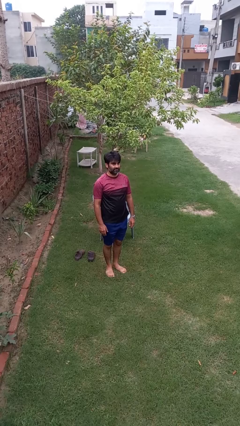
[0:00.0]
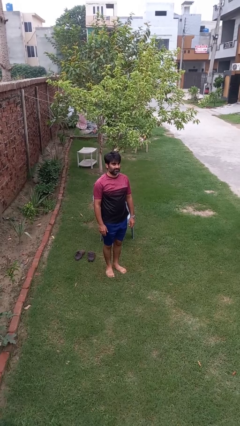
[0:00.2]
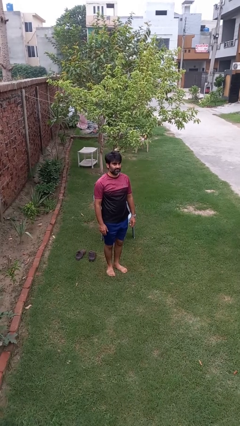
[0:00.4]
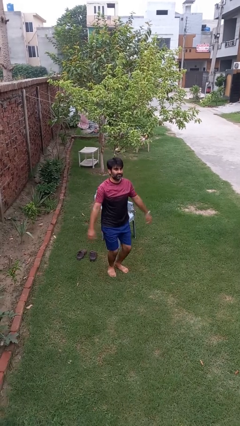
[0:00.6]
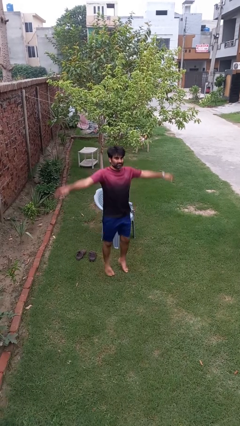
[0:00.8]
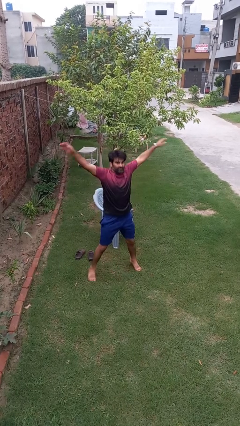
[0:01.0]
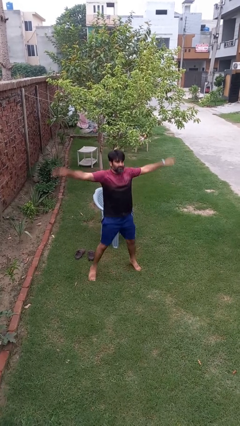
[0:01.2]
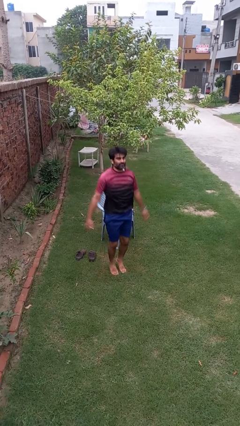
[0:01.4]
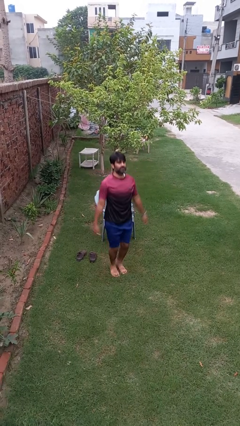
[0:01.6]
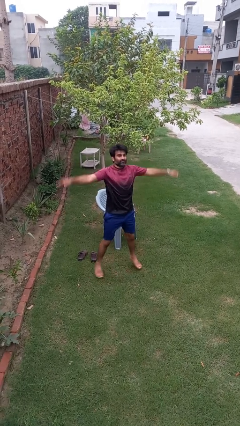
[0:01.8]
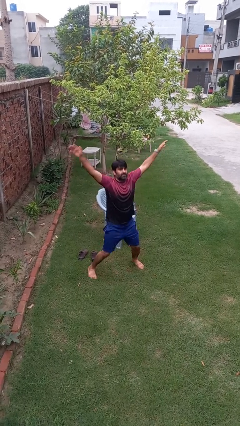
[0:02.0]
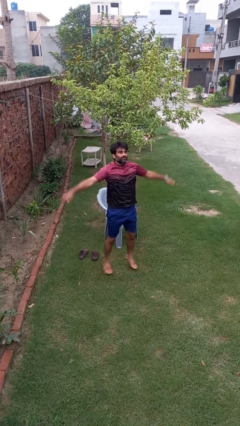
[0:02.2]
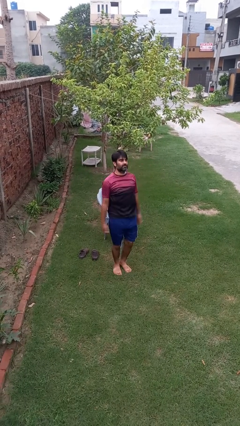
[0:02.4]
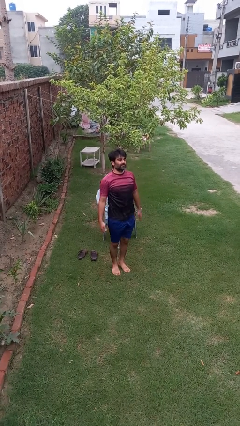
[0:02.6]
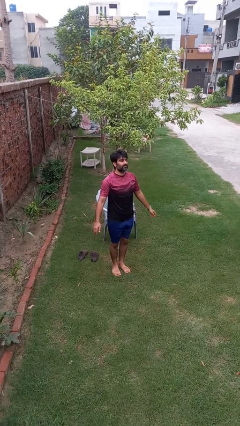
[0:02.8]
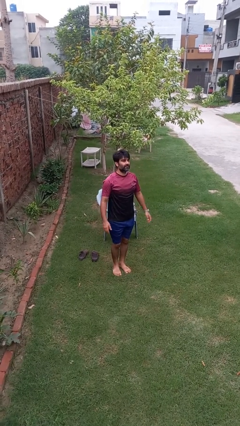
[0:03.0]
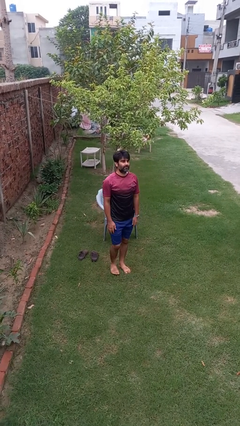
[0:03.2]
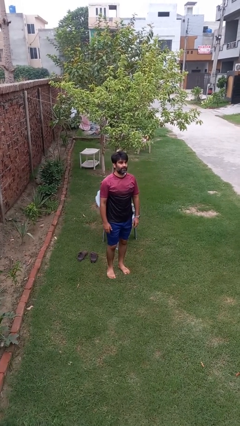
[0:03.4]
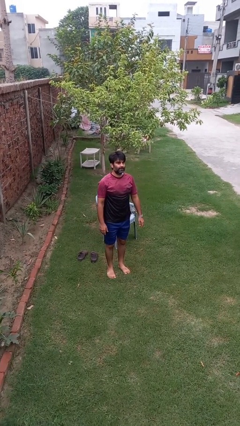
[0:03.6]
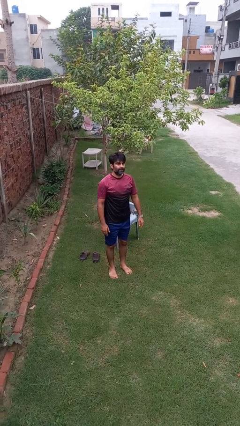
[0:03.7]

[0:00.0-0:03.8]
person exercises with jumping jacks

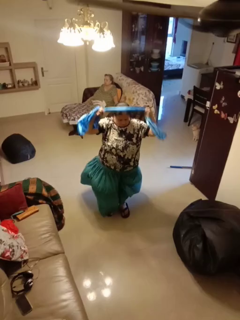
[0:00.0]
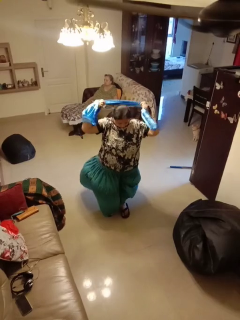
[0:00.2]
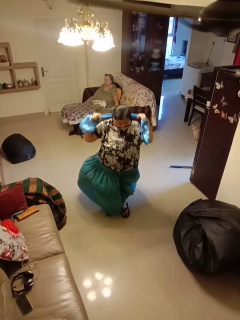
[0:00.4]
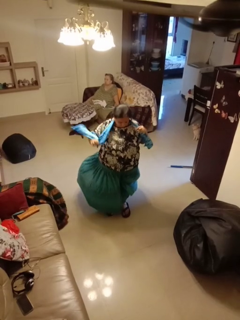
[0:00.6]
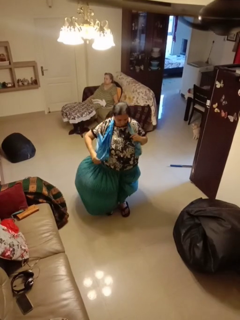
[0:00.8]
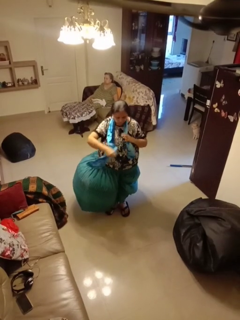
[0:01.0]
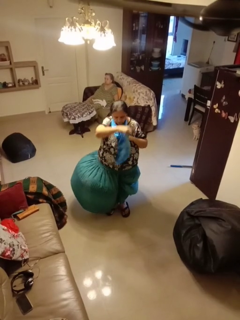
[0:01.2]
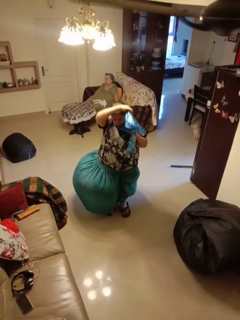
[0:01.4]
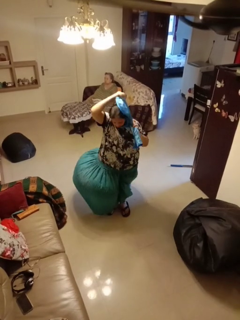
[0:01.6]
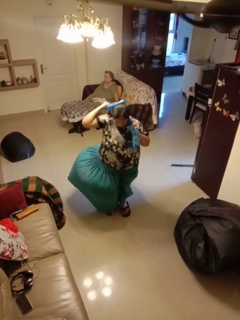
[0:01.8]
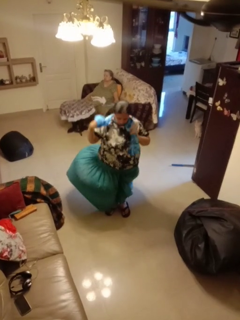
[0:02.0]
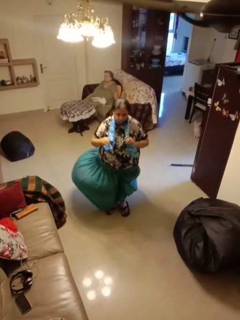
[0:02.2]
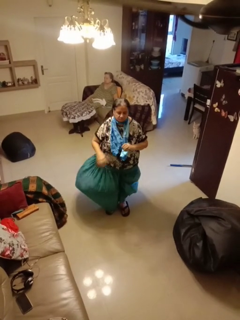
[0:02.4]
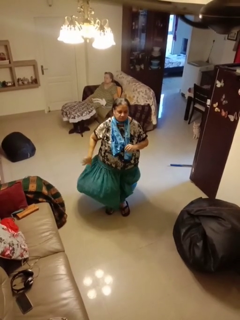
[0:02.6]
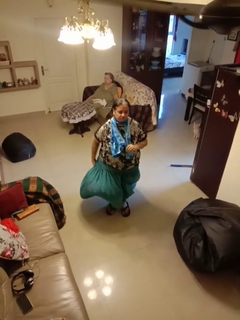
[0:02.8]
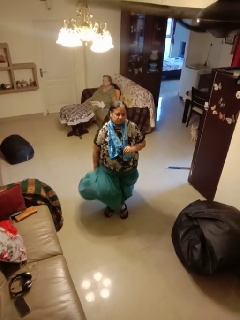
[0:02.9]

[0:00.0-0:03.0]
person puts on scarf

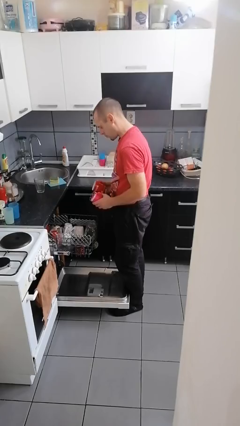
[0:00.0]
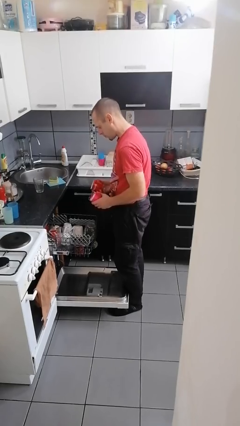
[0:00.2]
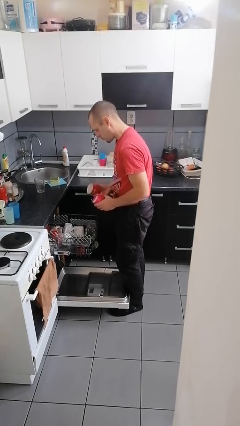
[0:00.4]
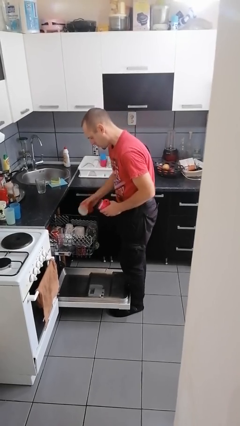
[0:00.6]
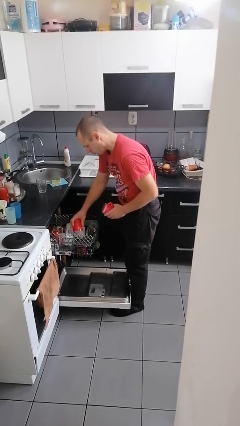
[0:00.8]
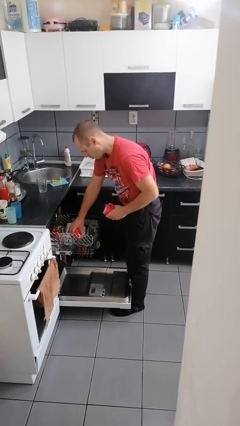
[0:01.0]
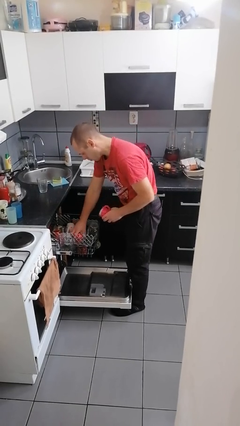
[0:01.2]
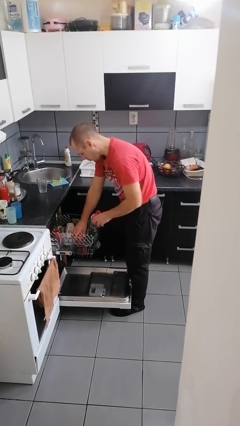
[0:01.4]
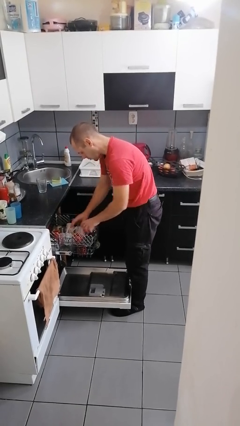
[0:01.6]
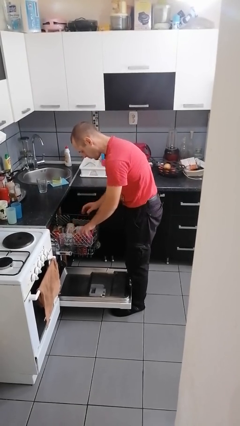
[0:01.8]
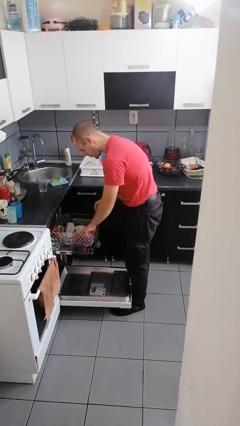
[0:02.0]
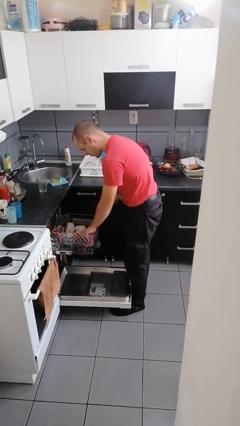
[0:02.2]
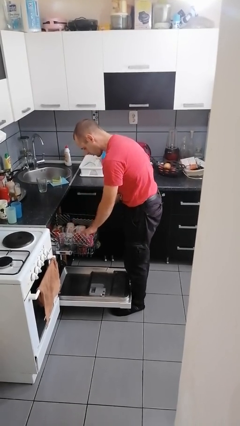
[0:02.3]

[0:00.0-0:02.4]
person loads dishwasher

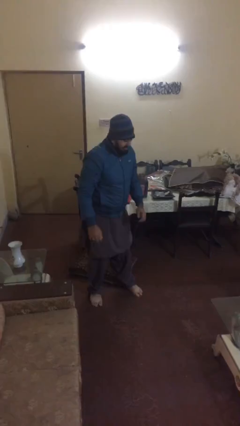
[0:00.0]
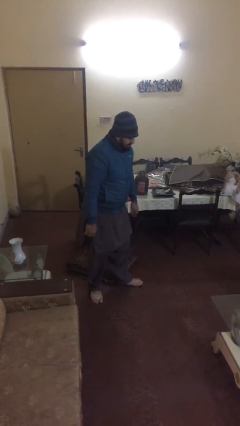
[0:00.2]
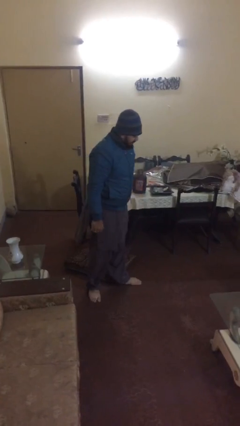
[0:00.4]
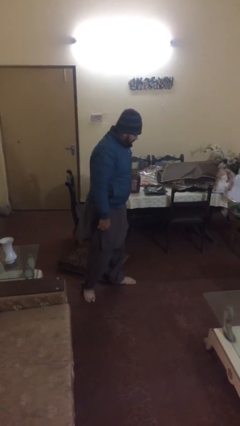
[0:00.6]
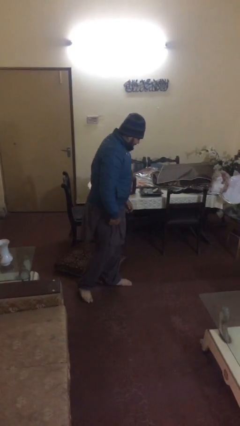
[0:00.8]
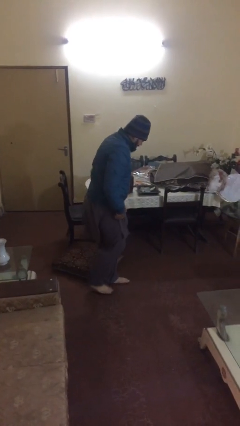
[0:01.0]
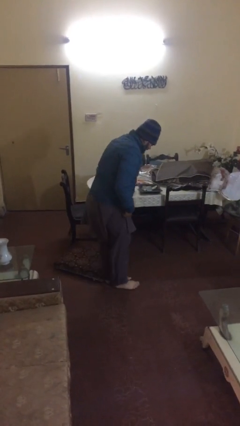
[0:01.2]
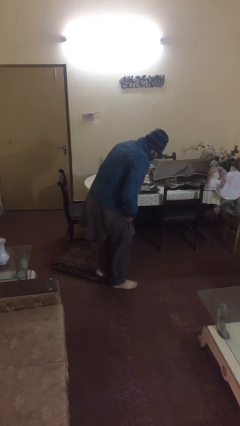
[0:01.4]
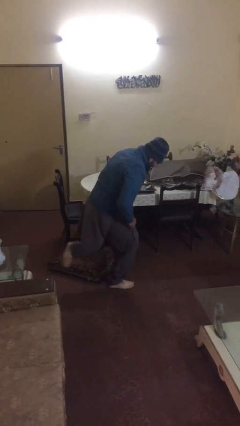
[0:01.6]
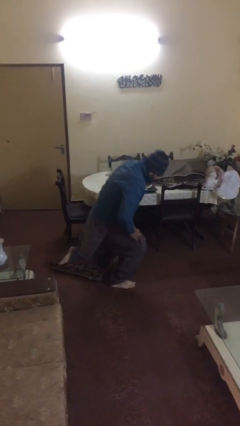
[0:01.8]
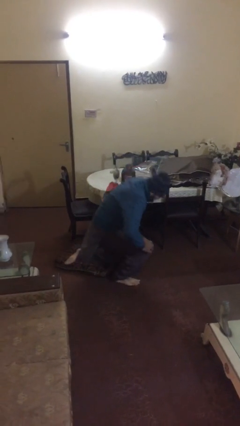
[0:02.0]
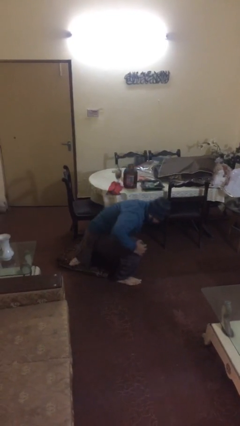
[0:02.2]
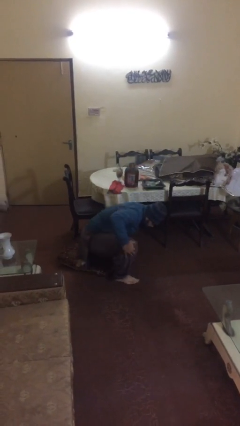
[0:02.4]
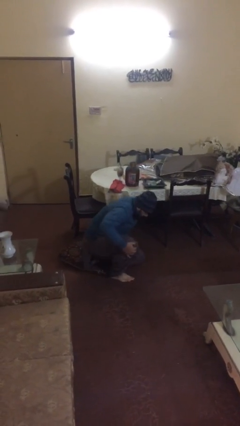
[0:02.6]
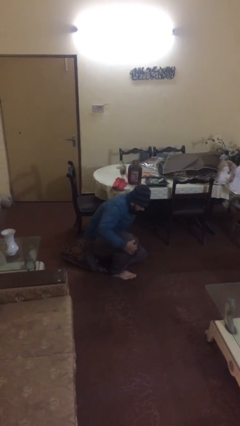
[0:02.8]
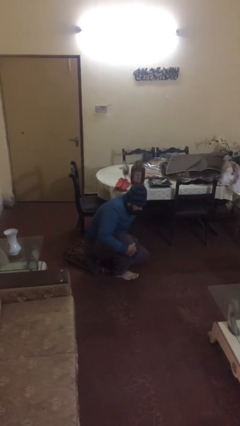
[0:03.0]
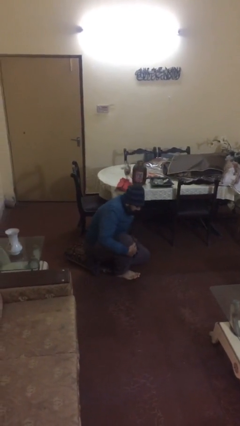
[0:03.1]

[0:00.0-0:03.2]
person sits down

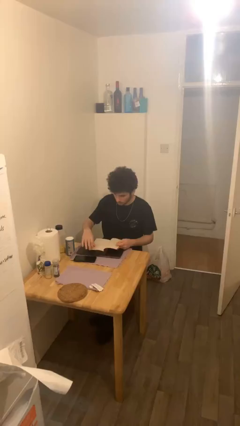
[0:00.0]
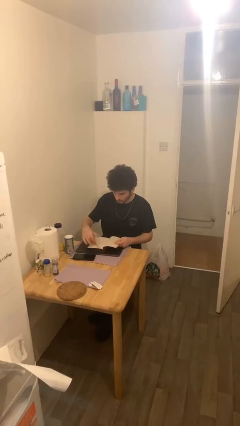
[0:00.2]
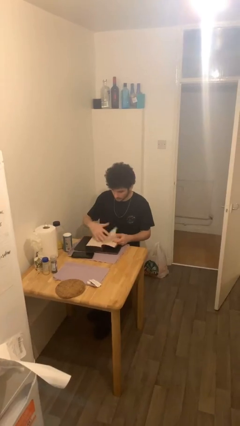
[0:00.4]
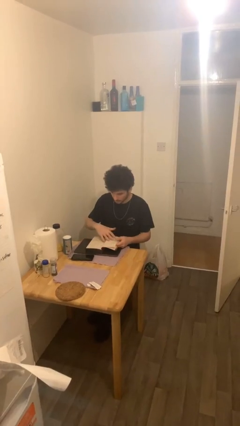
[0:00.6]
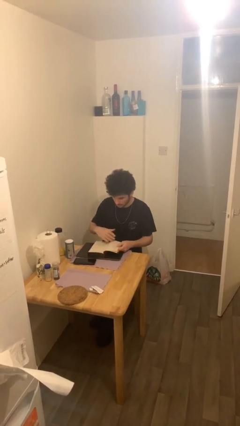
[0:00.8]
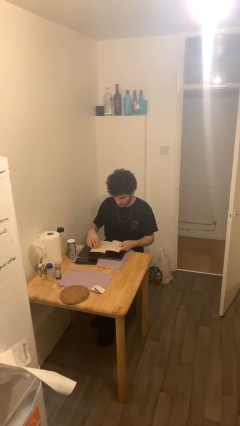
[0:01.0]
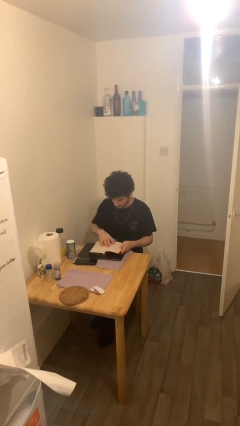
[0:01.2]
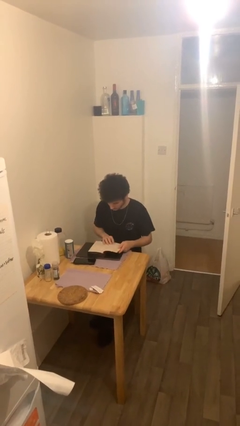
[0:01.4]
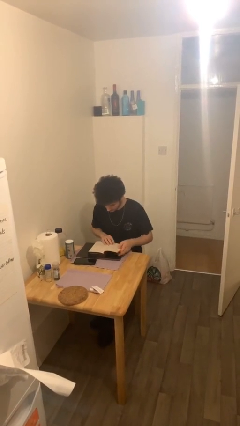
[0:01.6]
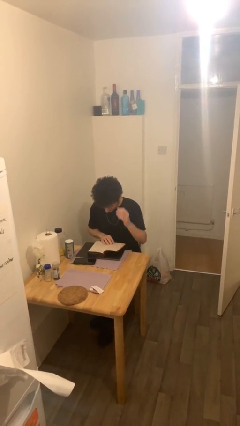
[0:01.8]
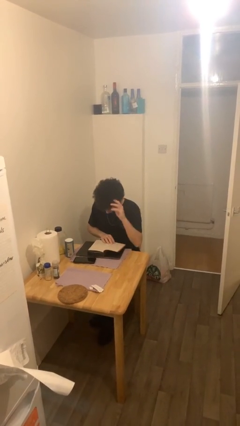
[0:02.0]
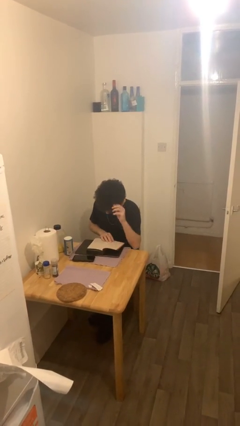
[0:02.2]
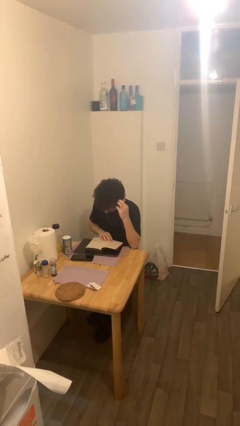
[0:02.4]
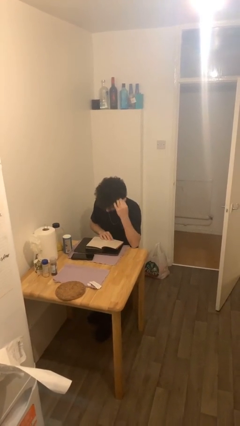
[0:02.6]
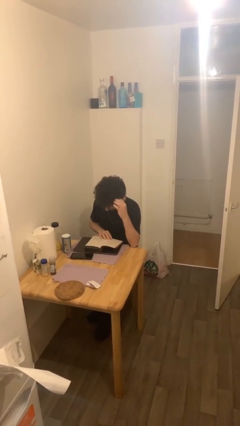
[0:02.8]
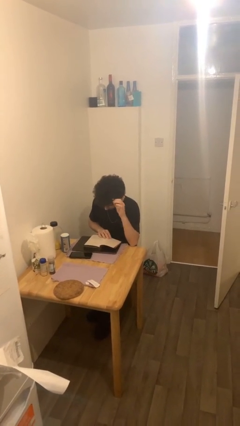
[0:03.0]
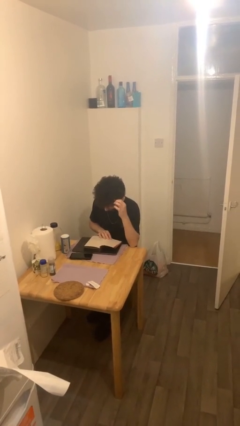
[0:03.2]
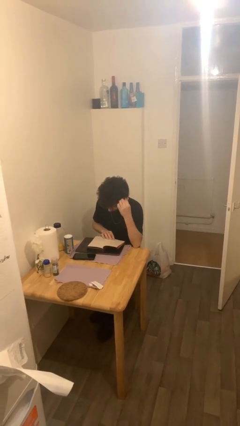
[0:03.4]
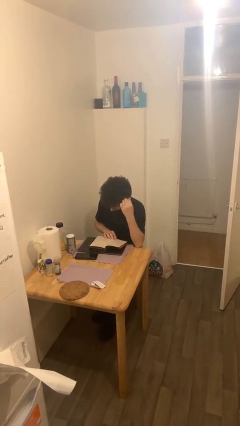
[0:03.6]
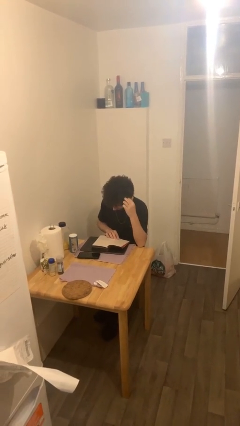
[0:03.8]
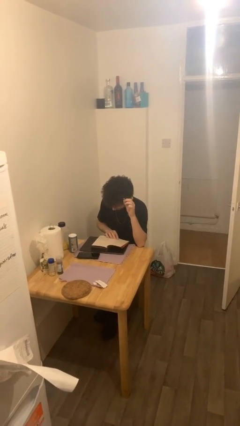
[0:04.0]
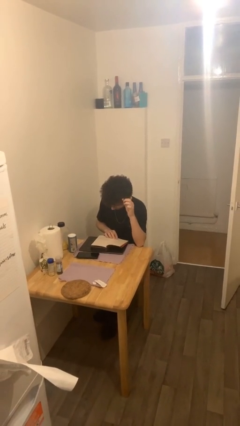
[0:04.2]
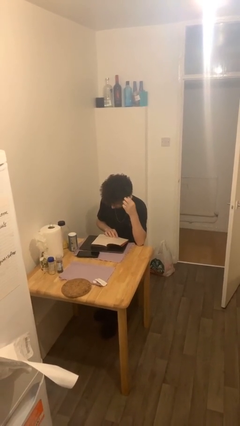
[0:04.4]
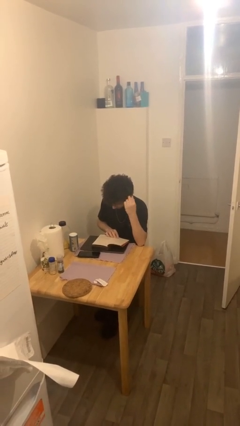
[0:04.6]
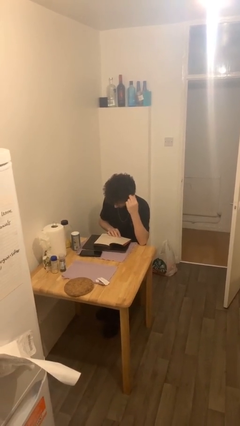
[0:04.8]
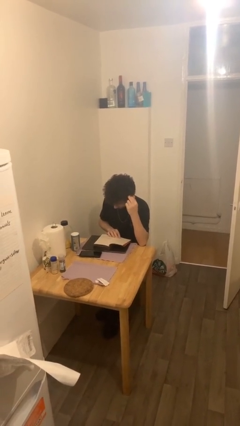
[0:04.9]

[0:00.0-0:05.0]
person reads document

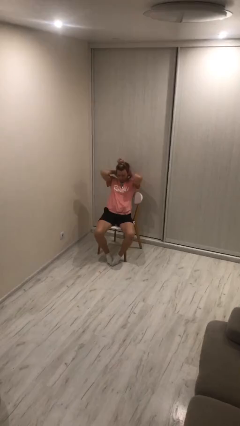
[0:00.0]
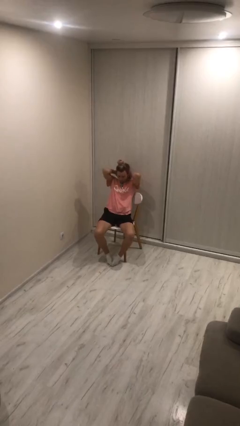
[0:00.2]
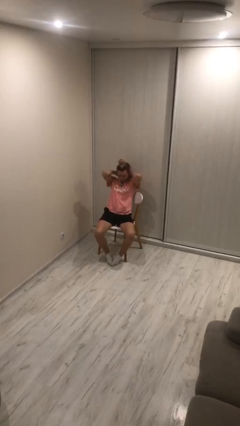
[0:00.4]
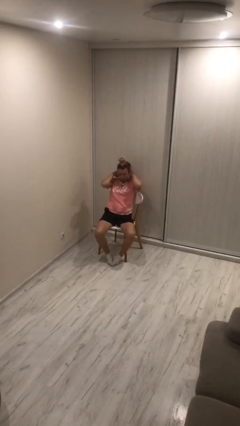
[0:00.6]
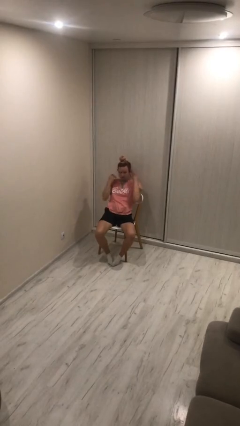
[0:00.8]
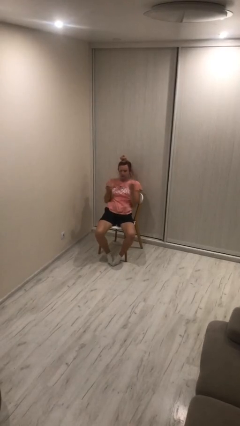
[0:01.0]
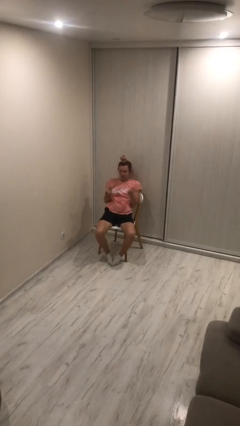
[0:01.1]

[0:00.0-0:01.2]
person takes off necklace
